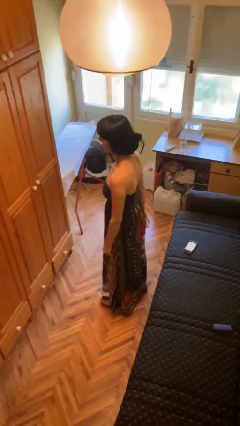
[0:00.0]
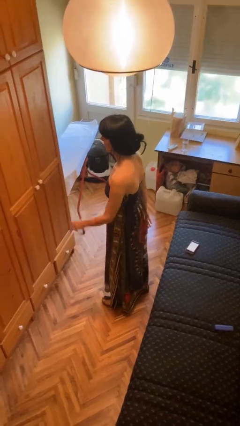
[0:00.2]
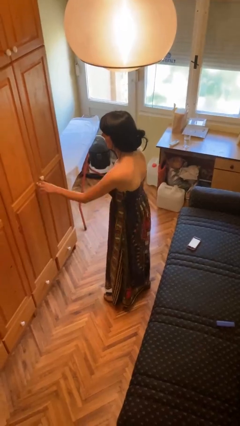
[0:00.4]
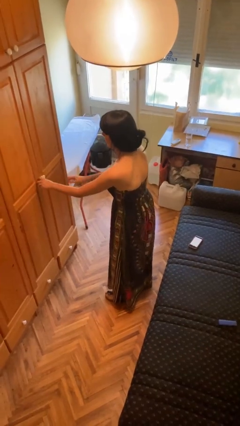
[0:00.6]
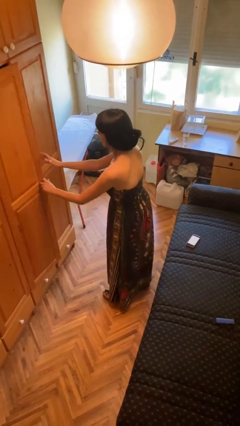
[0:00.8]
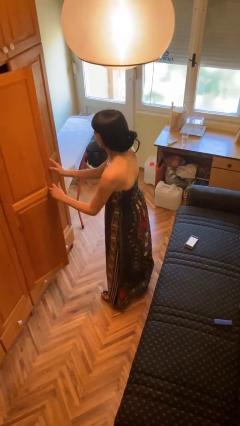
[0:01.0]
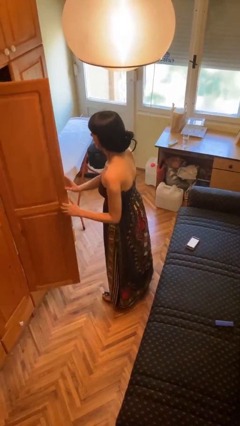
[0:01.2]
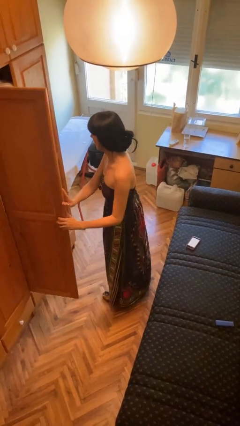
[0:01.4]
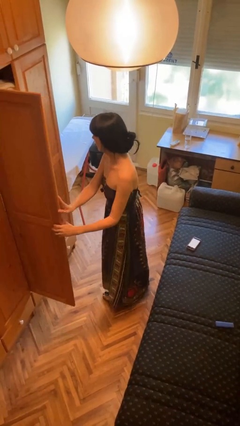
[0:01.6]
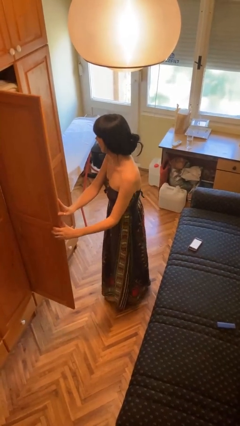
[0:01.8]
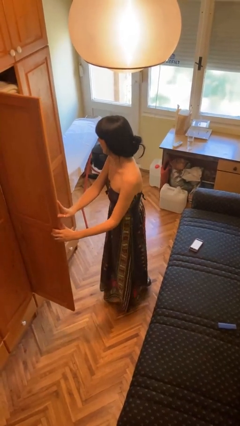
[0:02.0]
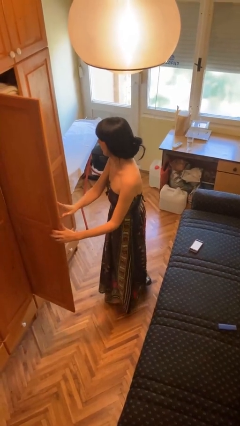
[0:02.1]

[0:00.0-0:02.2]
person opens closet door

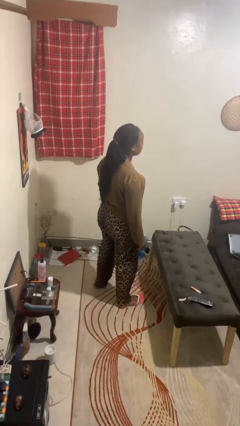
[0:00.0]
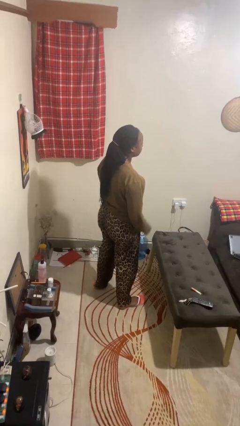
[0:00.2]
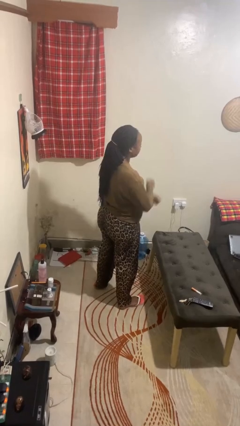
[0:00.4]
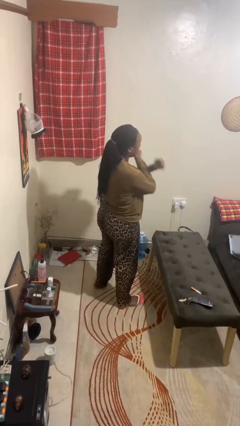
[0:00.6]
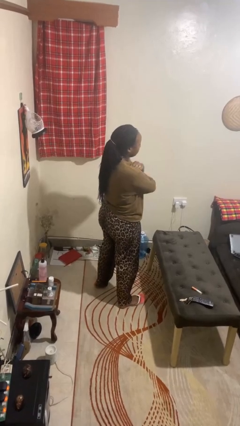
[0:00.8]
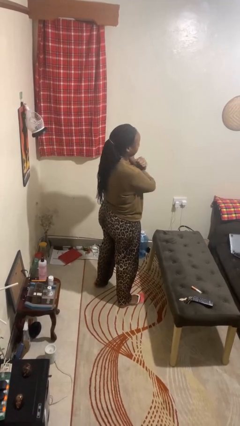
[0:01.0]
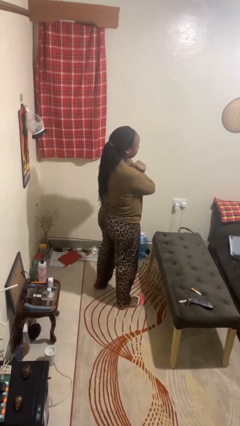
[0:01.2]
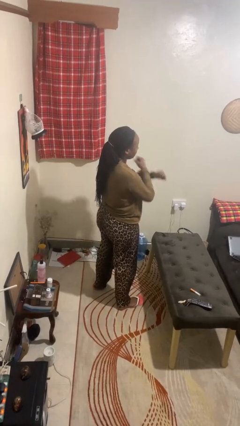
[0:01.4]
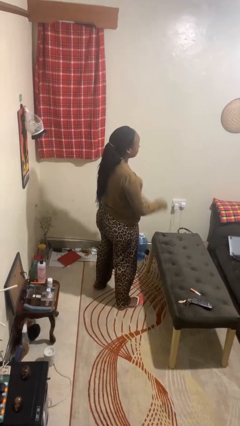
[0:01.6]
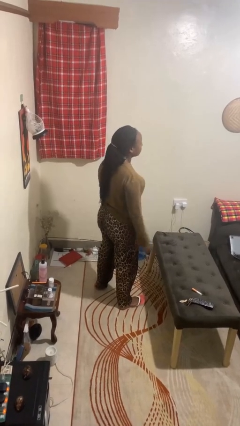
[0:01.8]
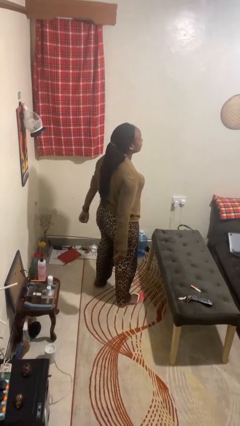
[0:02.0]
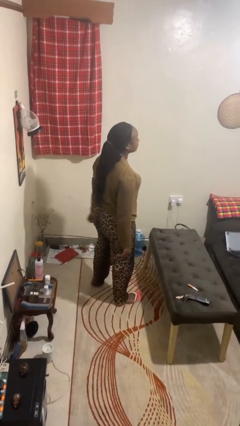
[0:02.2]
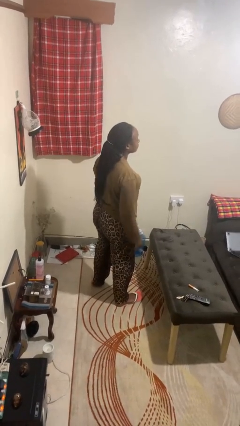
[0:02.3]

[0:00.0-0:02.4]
person gestures arms x

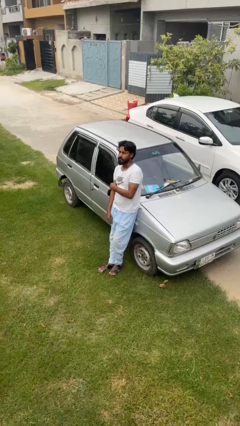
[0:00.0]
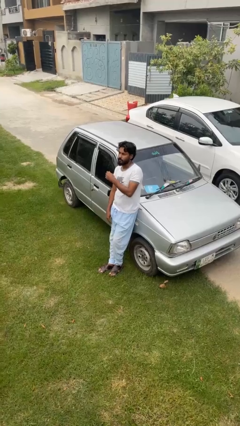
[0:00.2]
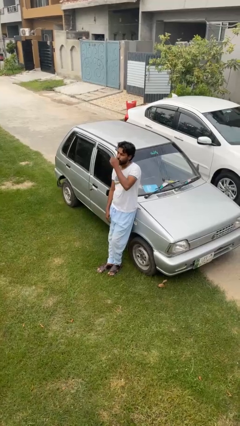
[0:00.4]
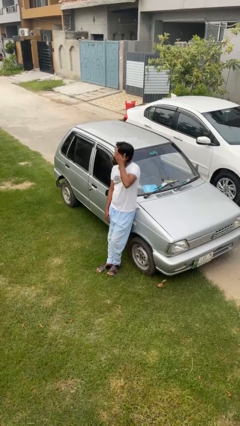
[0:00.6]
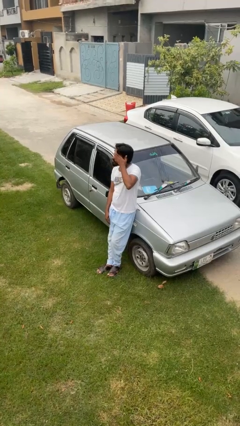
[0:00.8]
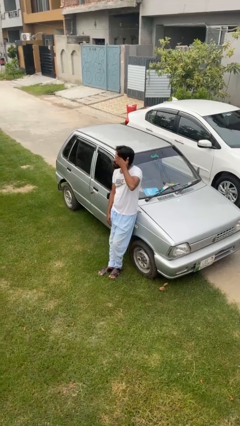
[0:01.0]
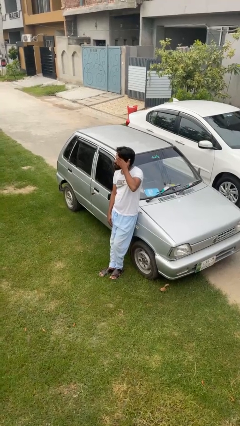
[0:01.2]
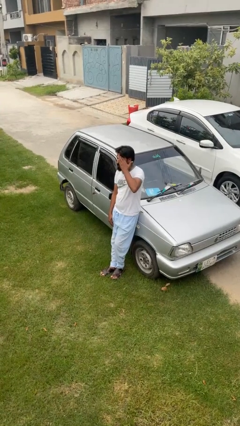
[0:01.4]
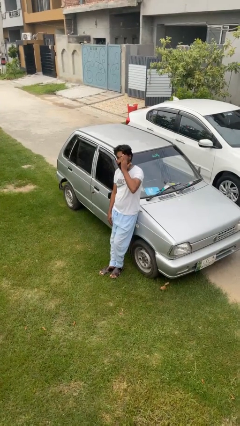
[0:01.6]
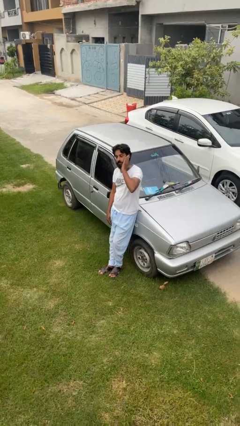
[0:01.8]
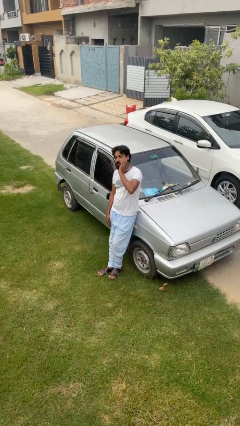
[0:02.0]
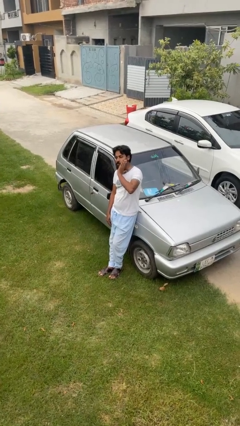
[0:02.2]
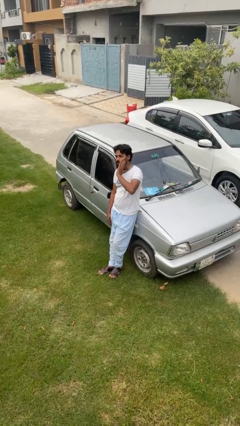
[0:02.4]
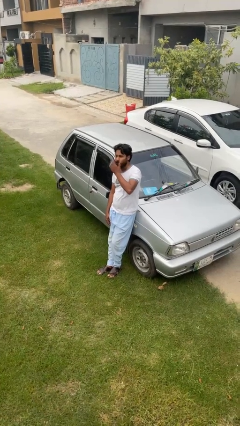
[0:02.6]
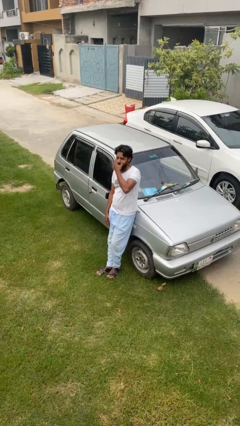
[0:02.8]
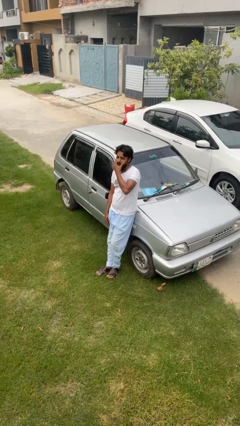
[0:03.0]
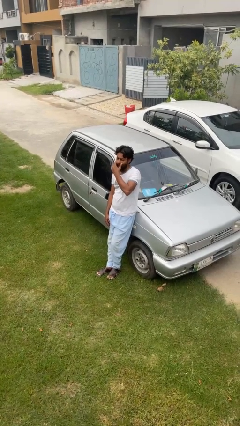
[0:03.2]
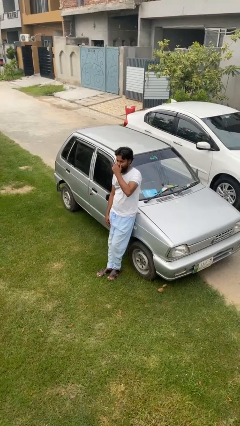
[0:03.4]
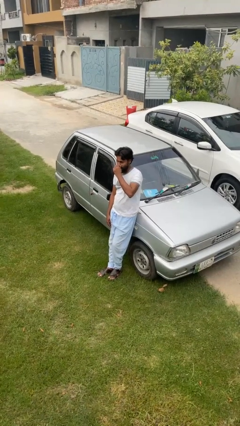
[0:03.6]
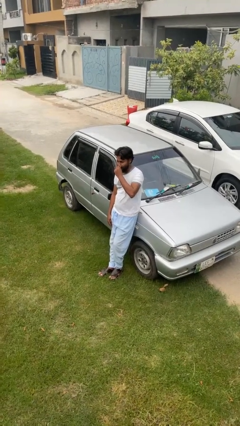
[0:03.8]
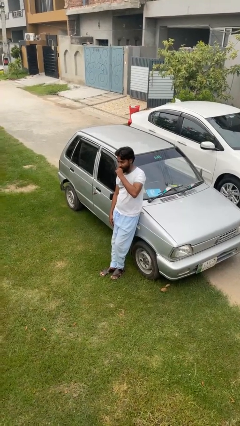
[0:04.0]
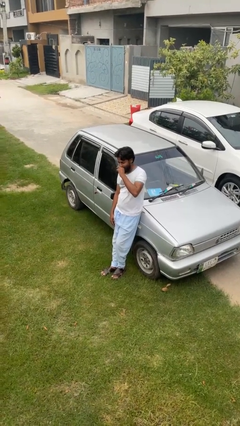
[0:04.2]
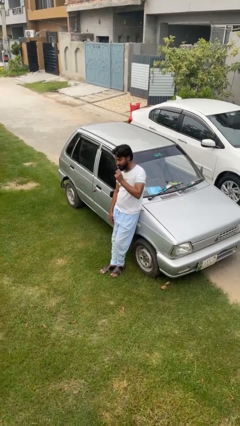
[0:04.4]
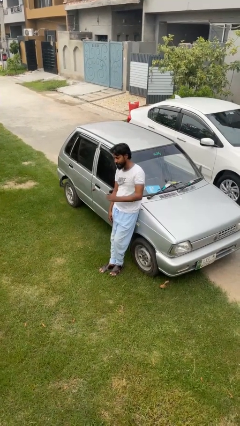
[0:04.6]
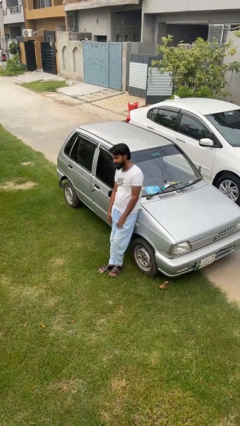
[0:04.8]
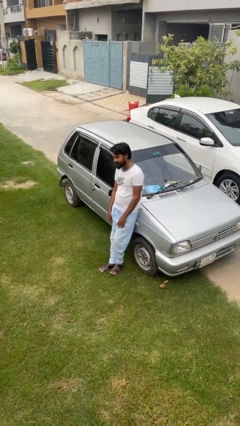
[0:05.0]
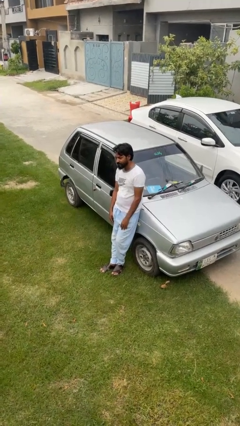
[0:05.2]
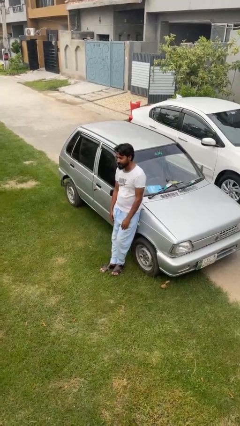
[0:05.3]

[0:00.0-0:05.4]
person scratches face

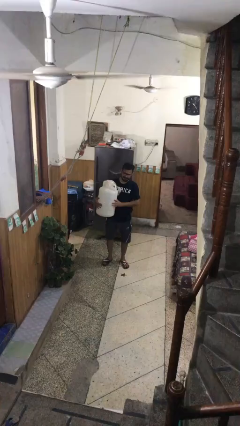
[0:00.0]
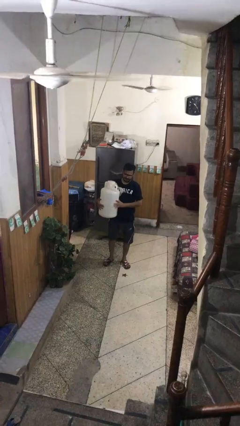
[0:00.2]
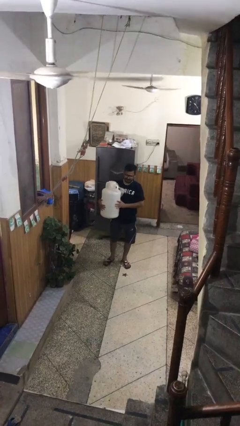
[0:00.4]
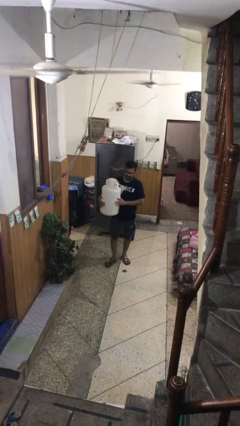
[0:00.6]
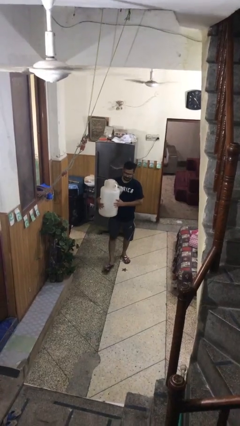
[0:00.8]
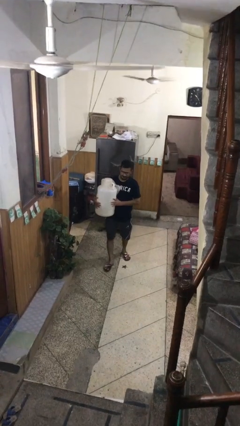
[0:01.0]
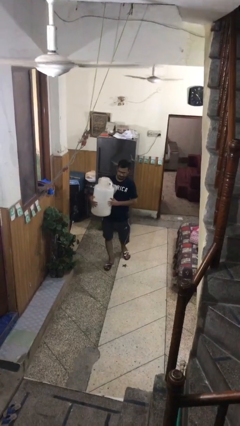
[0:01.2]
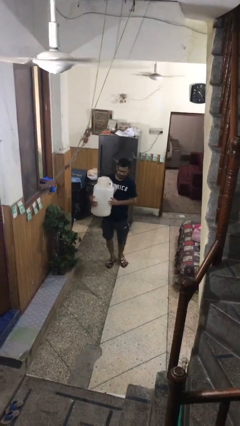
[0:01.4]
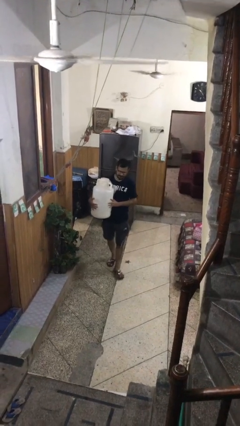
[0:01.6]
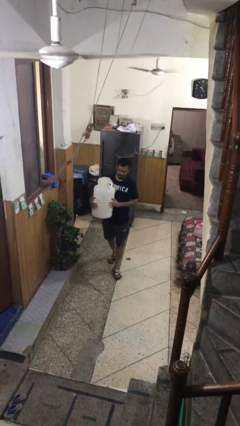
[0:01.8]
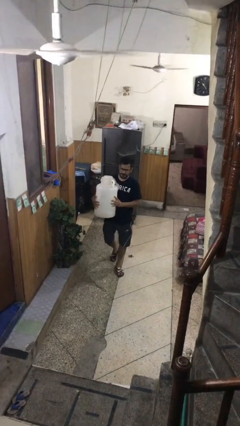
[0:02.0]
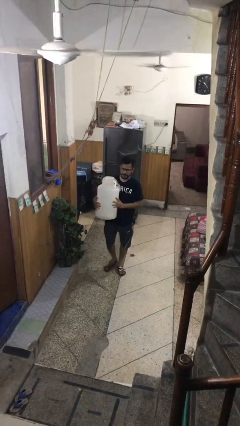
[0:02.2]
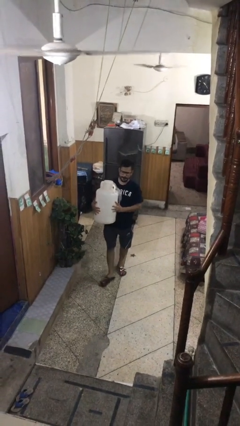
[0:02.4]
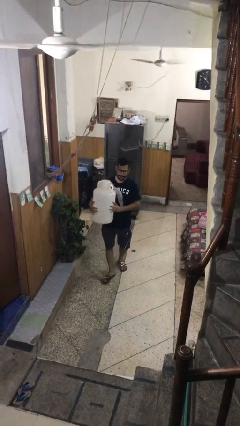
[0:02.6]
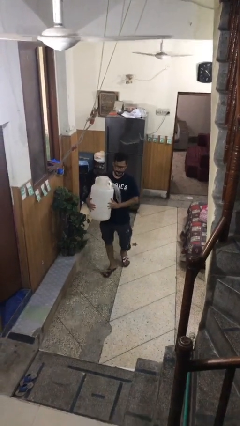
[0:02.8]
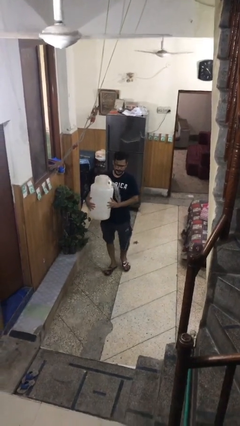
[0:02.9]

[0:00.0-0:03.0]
person carries heavy object

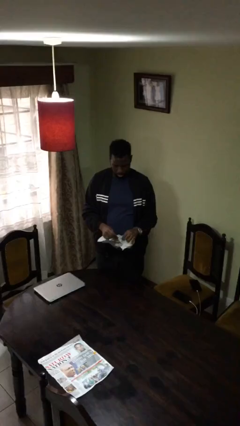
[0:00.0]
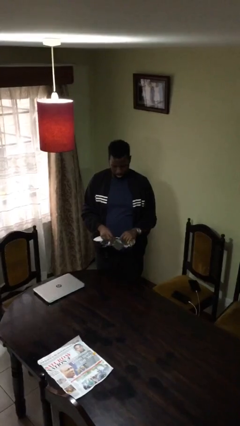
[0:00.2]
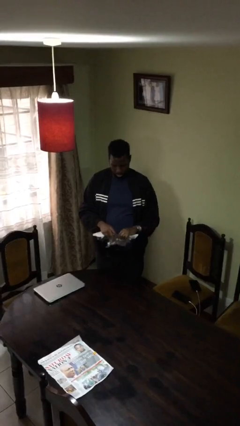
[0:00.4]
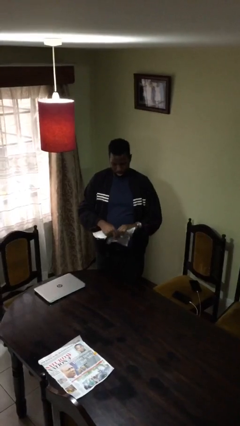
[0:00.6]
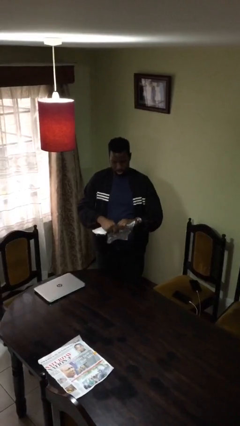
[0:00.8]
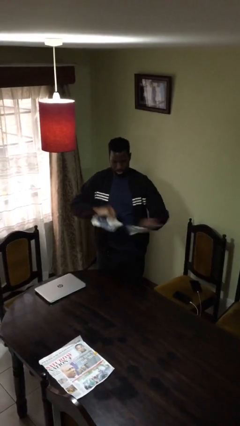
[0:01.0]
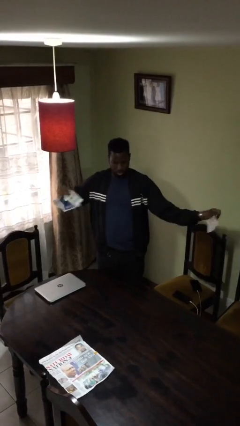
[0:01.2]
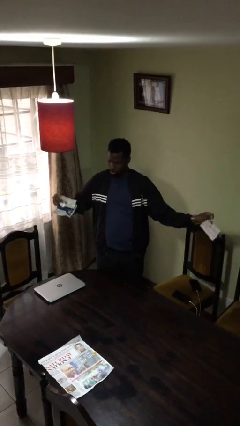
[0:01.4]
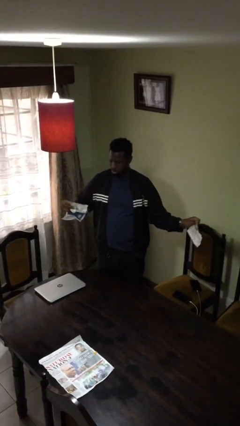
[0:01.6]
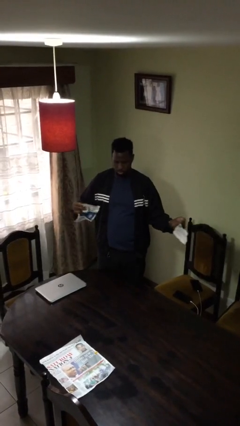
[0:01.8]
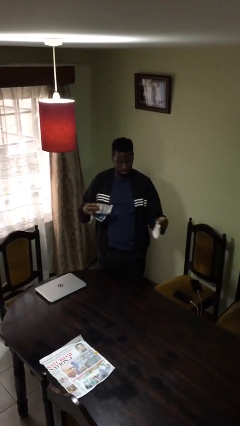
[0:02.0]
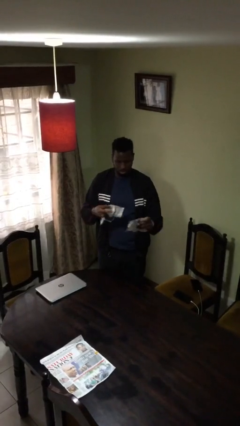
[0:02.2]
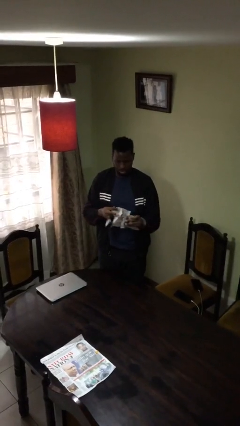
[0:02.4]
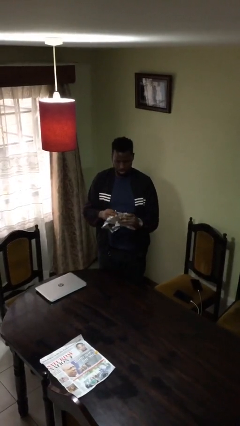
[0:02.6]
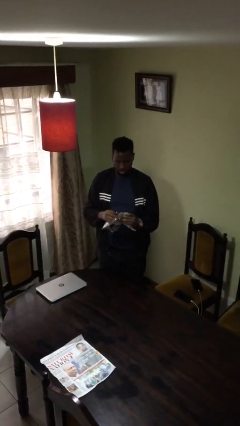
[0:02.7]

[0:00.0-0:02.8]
person tears paper

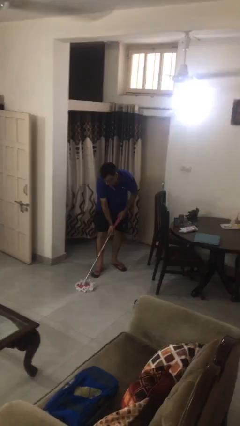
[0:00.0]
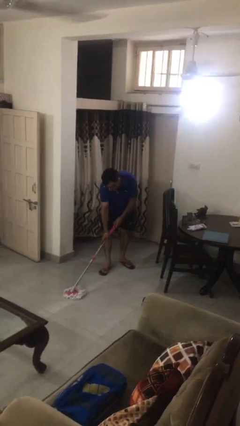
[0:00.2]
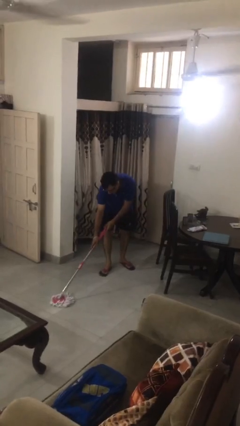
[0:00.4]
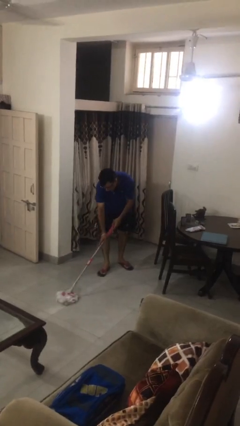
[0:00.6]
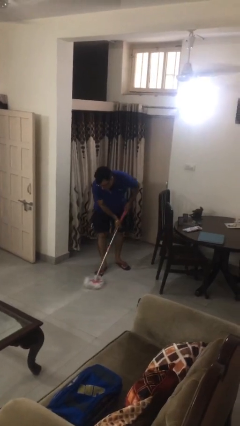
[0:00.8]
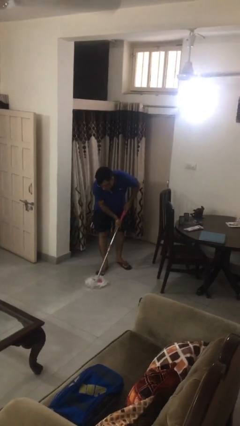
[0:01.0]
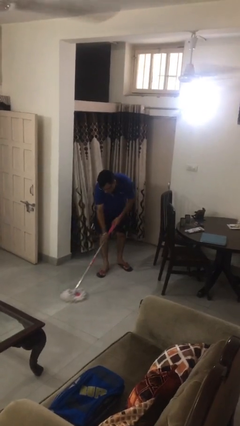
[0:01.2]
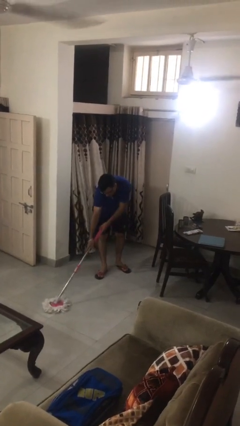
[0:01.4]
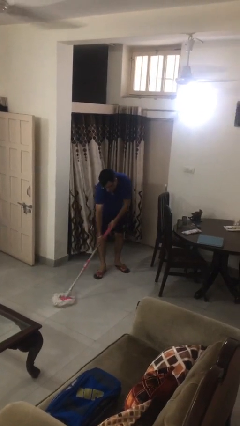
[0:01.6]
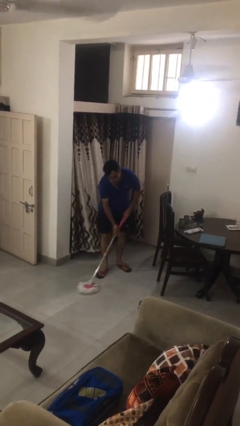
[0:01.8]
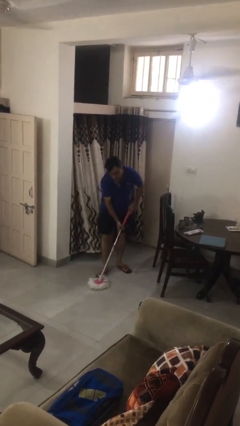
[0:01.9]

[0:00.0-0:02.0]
person mops

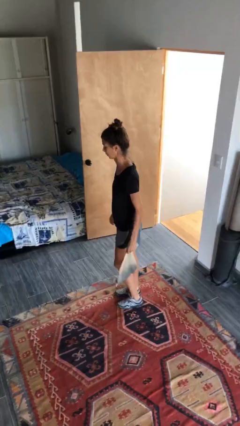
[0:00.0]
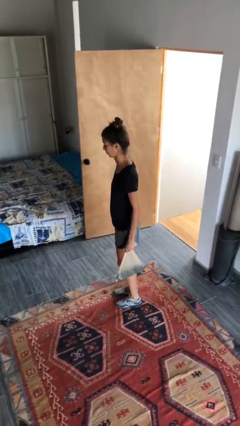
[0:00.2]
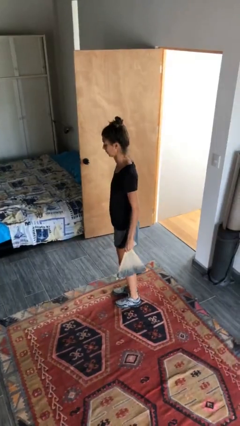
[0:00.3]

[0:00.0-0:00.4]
person carries groceries
